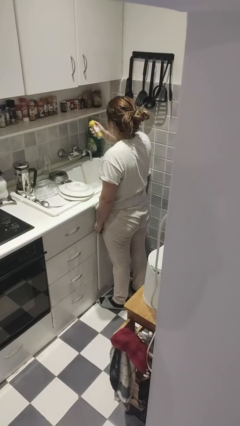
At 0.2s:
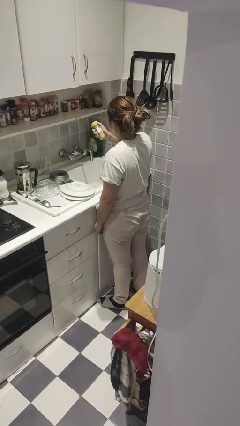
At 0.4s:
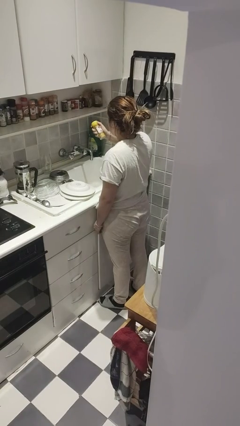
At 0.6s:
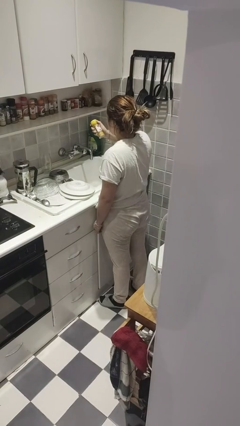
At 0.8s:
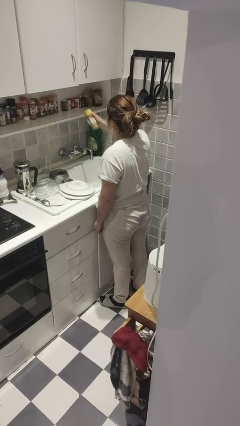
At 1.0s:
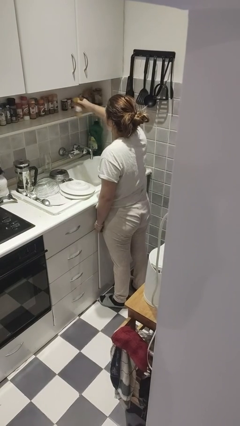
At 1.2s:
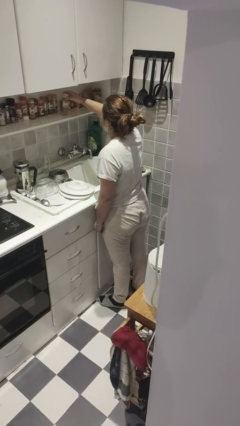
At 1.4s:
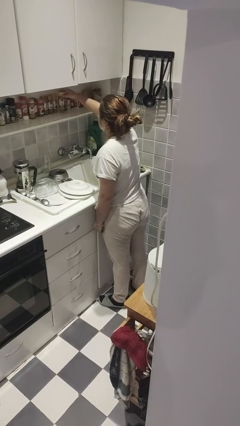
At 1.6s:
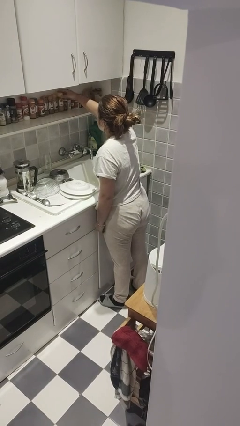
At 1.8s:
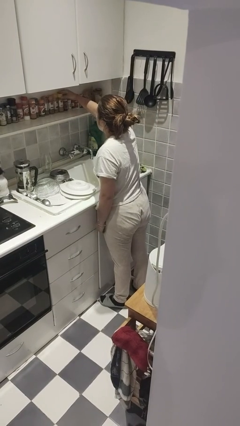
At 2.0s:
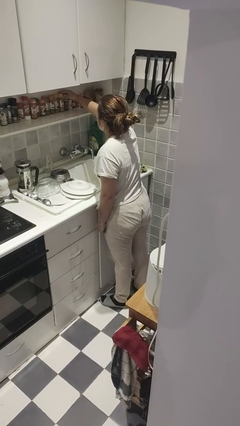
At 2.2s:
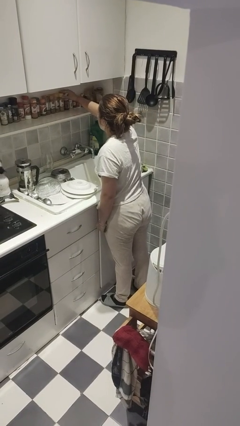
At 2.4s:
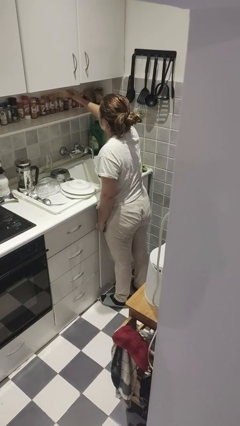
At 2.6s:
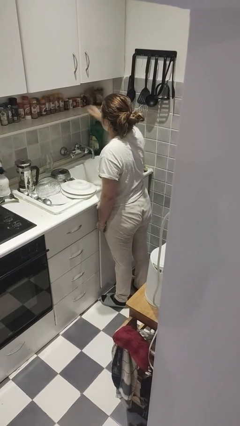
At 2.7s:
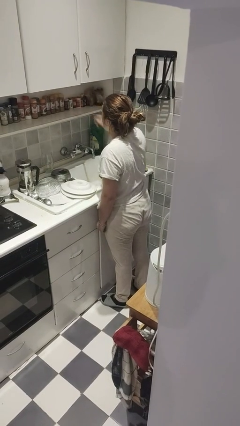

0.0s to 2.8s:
person puts down object on countertop

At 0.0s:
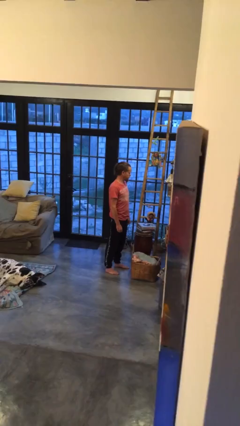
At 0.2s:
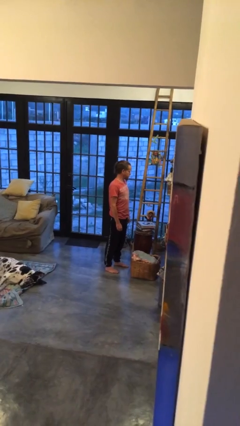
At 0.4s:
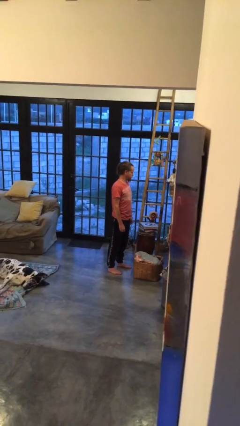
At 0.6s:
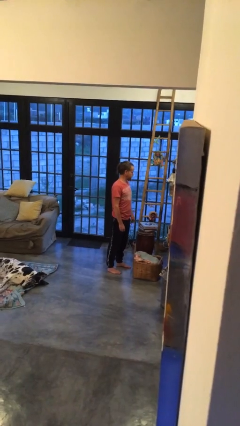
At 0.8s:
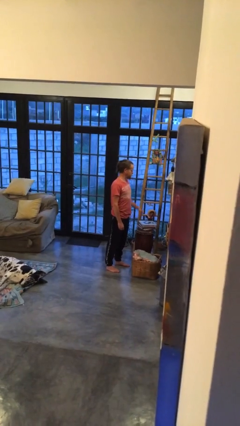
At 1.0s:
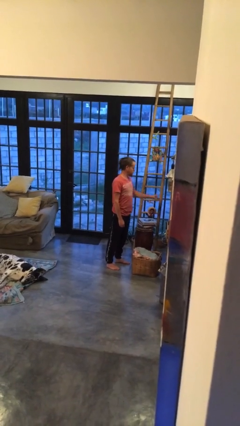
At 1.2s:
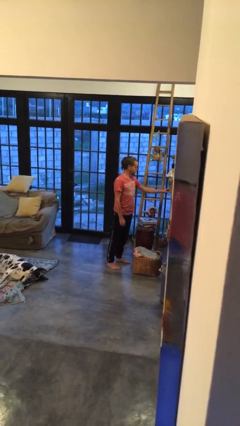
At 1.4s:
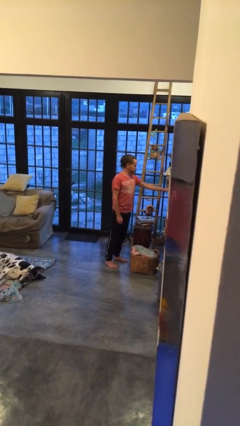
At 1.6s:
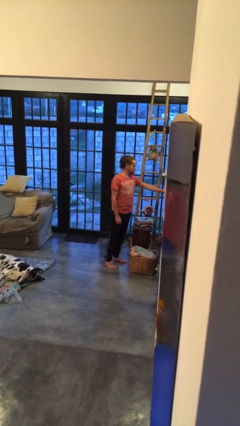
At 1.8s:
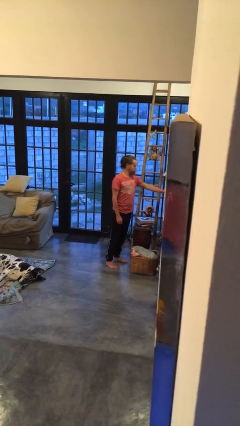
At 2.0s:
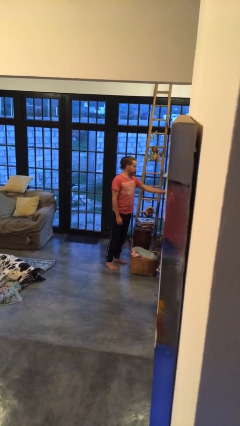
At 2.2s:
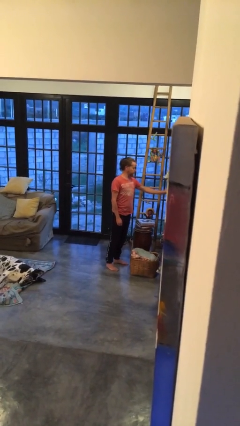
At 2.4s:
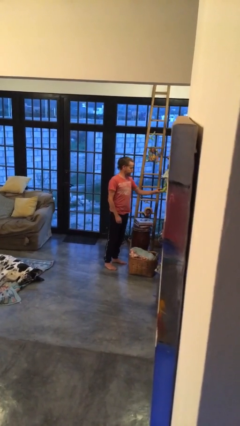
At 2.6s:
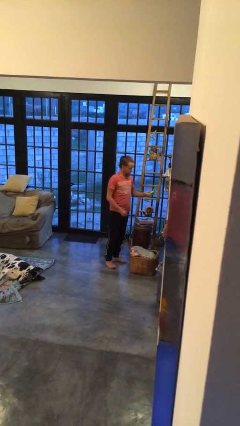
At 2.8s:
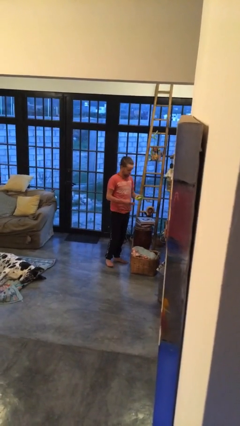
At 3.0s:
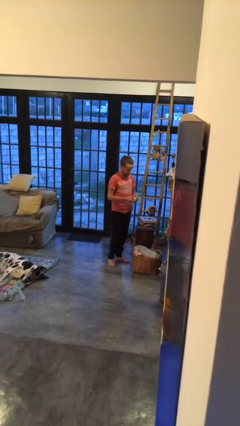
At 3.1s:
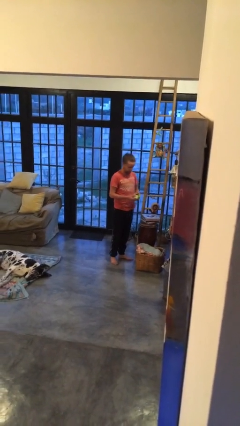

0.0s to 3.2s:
person picks up object from countertop

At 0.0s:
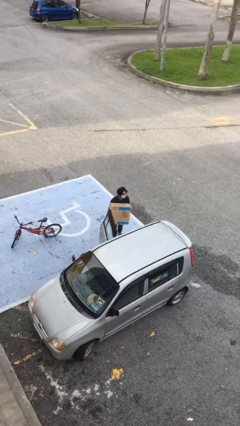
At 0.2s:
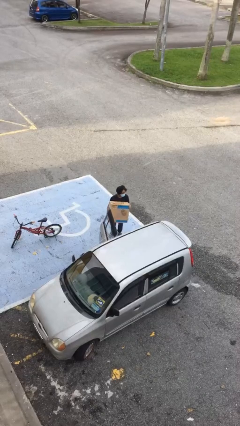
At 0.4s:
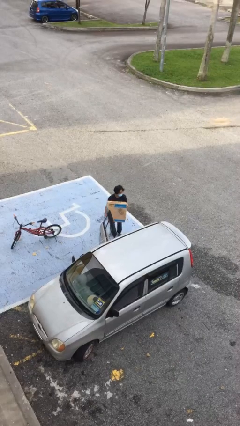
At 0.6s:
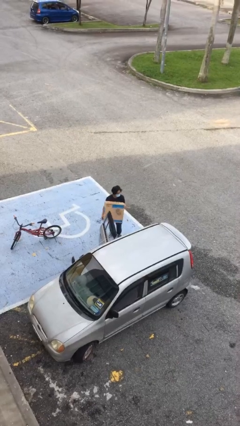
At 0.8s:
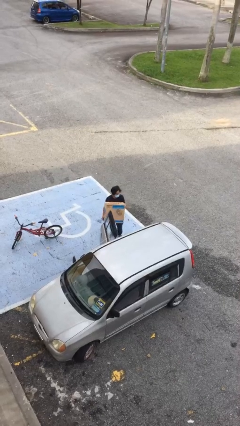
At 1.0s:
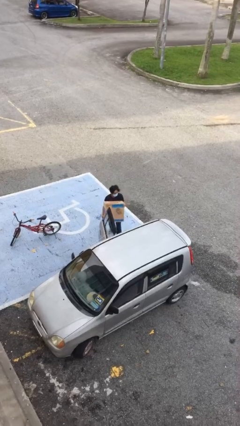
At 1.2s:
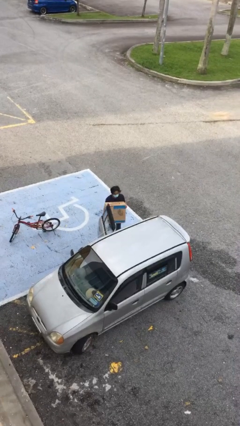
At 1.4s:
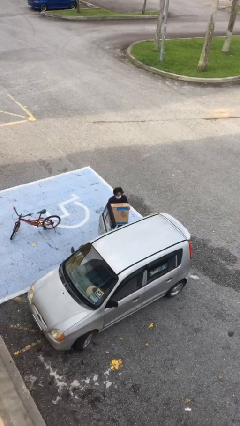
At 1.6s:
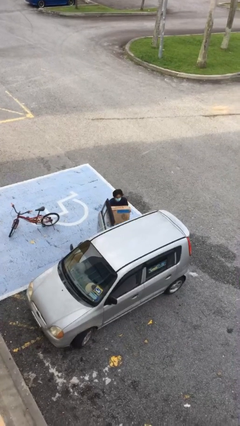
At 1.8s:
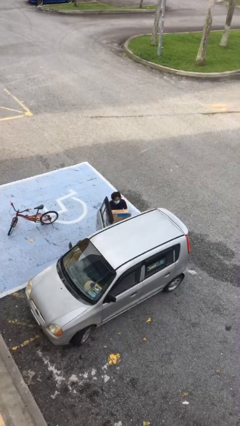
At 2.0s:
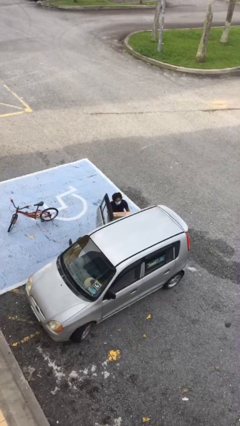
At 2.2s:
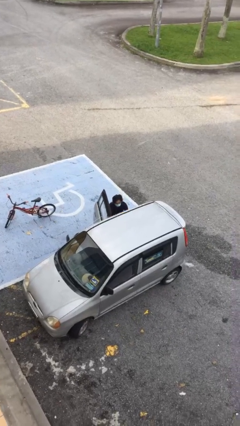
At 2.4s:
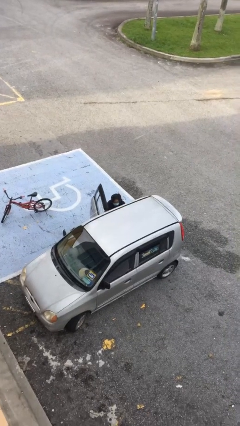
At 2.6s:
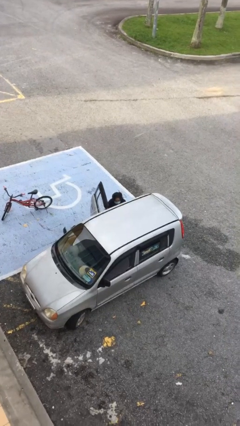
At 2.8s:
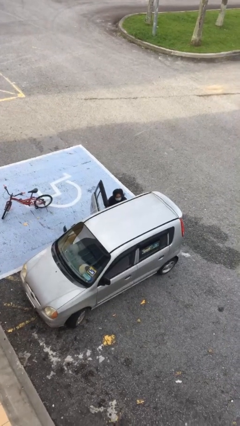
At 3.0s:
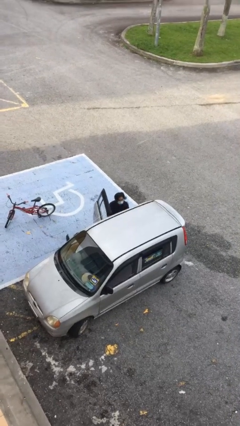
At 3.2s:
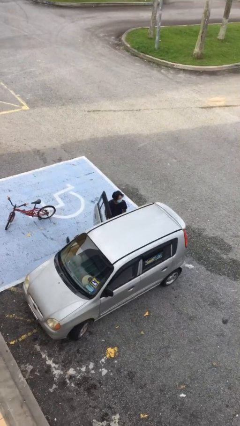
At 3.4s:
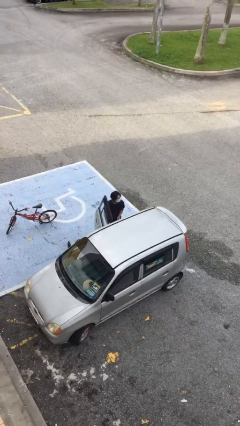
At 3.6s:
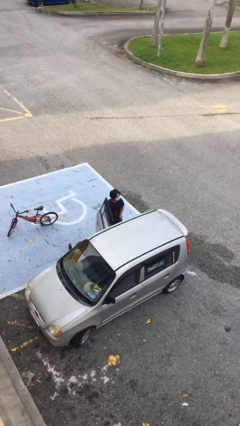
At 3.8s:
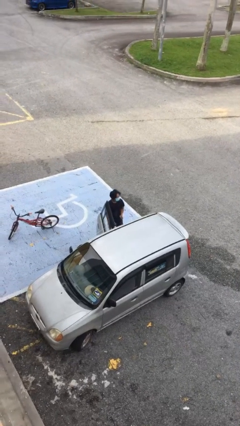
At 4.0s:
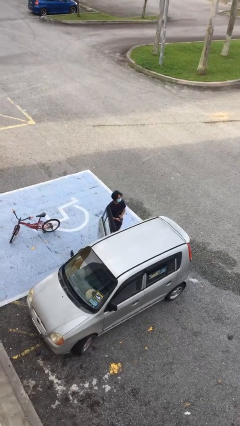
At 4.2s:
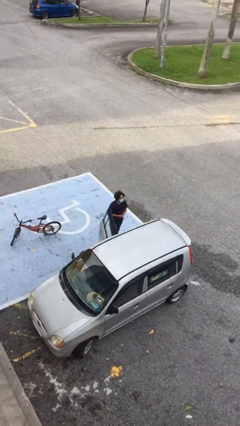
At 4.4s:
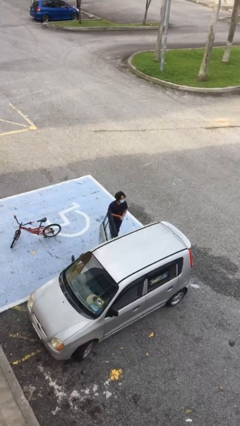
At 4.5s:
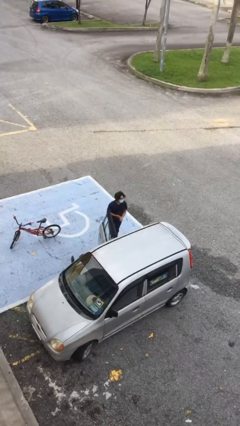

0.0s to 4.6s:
person loads car

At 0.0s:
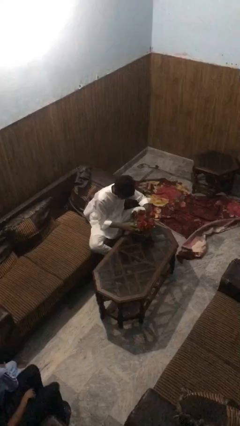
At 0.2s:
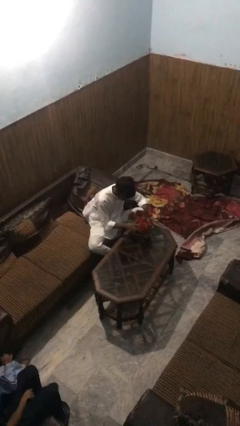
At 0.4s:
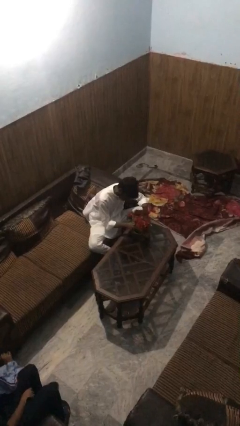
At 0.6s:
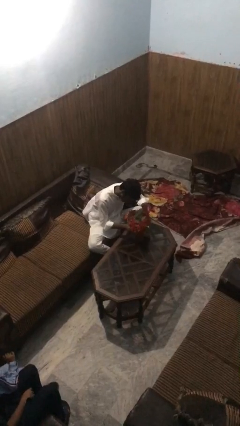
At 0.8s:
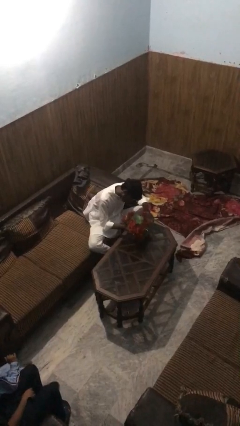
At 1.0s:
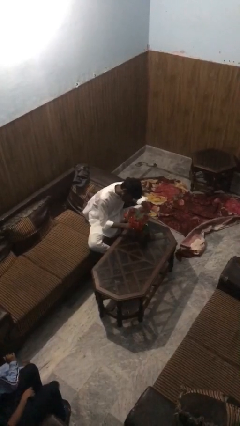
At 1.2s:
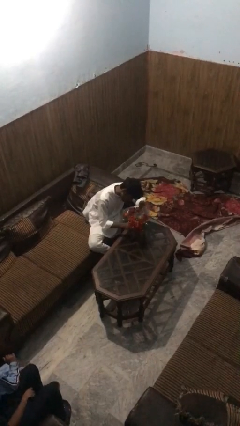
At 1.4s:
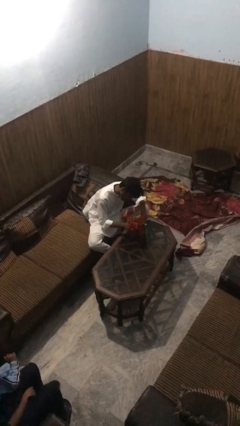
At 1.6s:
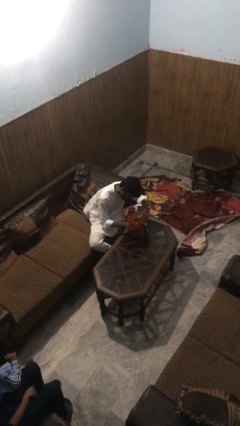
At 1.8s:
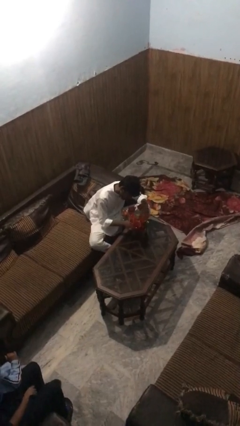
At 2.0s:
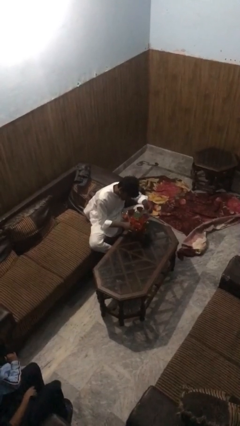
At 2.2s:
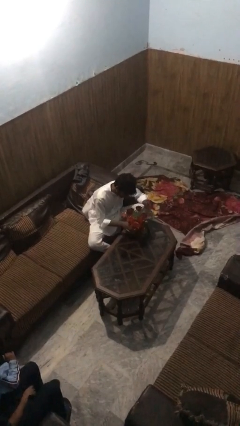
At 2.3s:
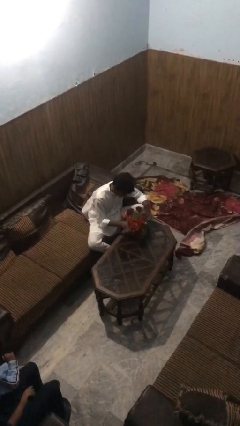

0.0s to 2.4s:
person arranges flowers in vase

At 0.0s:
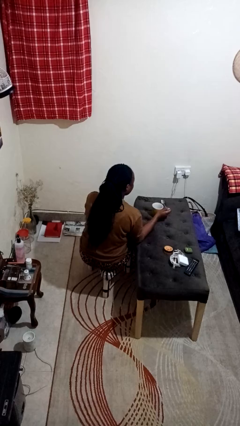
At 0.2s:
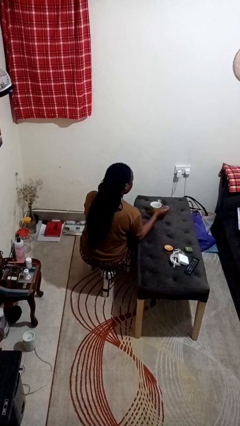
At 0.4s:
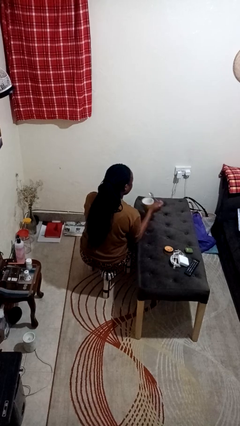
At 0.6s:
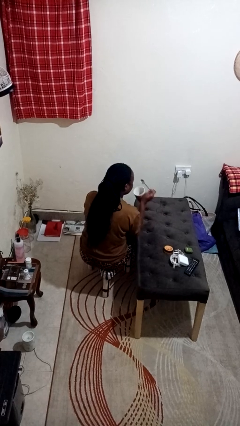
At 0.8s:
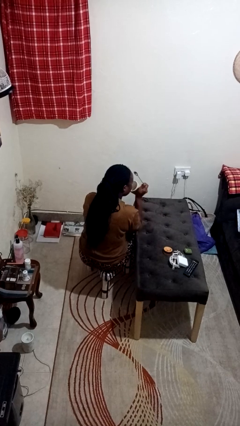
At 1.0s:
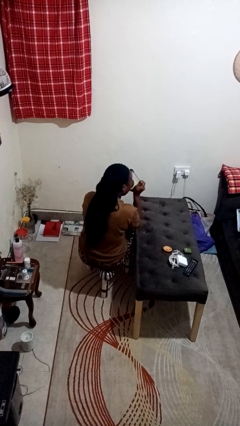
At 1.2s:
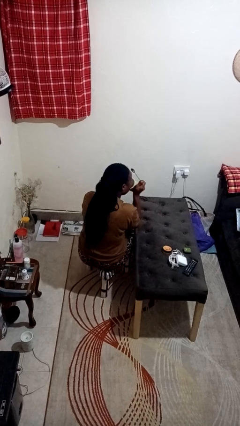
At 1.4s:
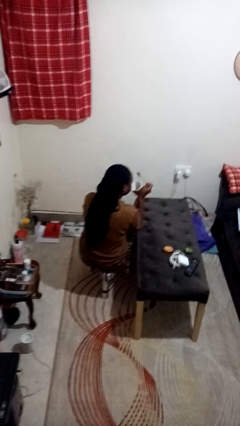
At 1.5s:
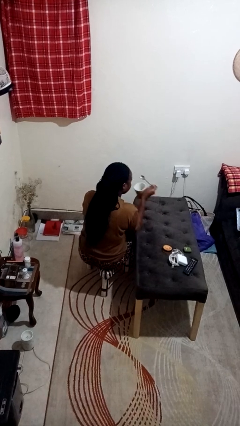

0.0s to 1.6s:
person drinks from mug

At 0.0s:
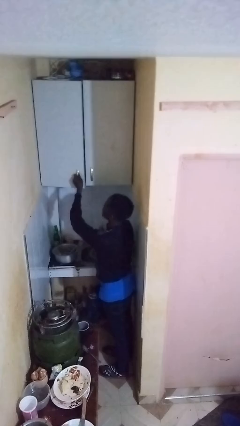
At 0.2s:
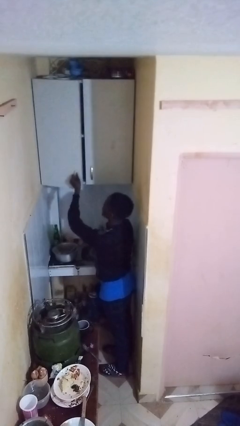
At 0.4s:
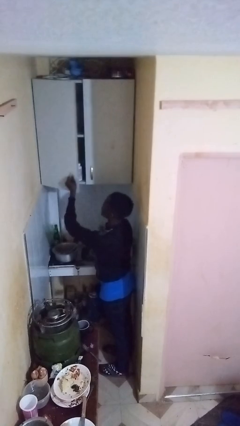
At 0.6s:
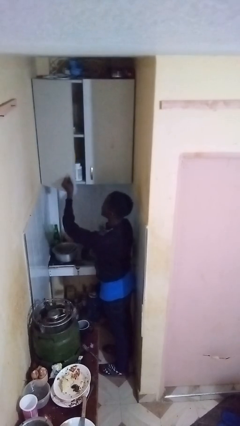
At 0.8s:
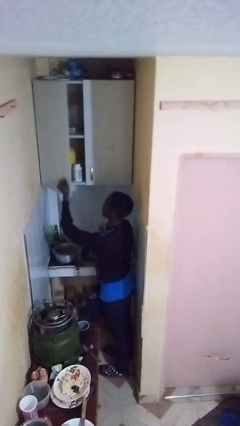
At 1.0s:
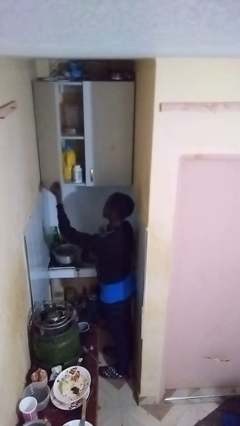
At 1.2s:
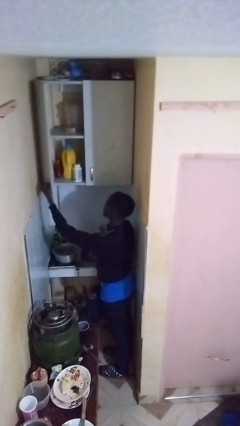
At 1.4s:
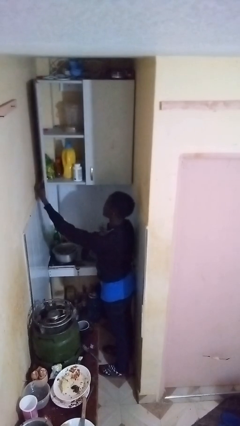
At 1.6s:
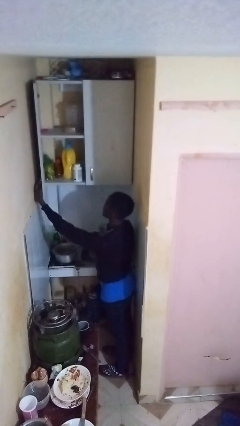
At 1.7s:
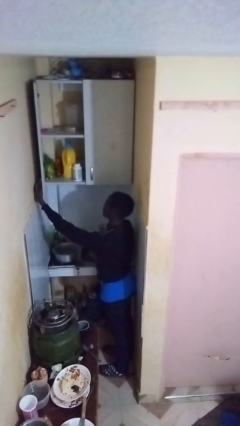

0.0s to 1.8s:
person opens kitchen drawer

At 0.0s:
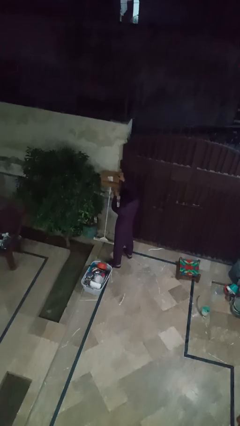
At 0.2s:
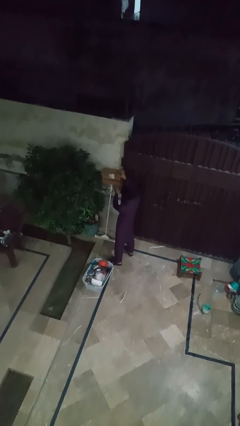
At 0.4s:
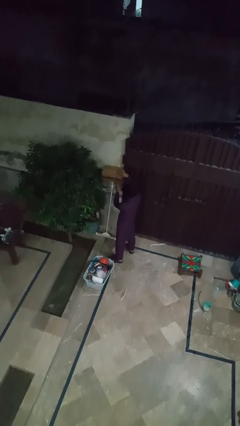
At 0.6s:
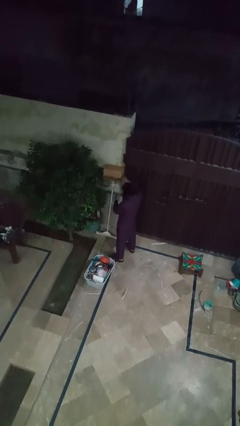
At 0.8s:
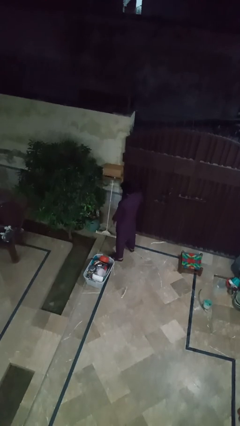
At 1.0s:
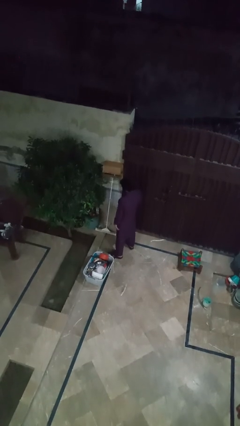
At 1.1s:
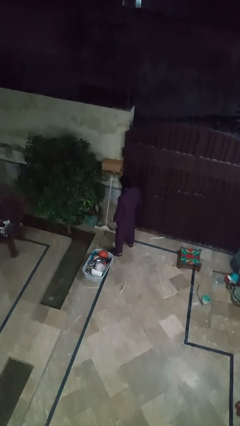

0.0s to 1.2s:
person closes mailbox
